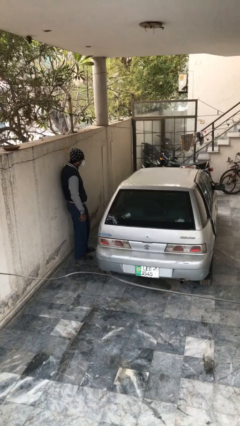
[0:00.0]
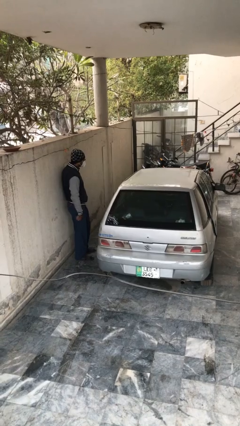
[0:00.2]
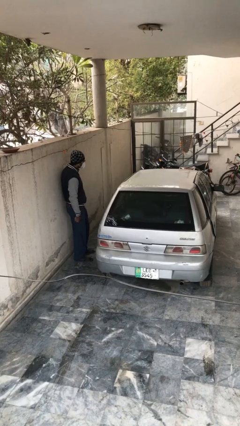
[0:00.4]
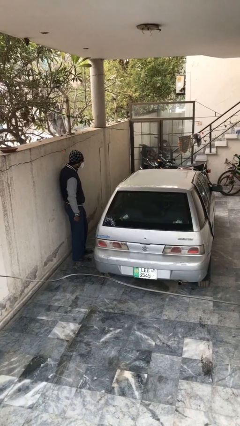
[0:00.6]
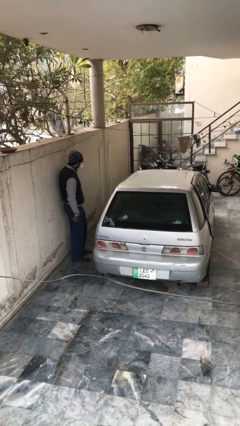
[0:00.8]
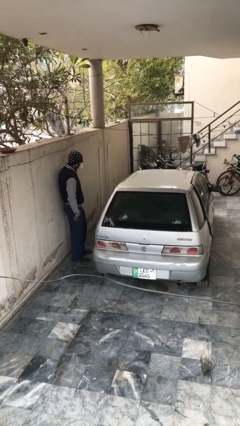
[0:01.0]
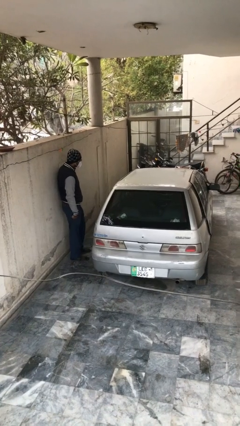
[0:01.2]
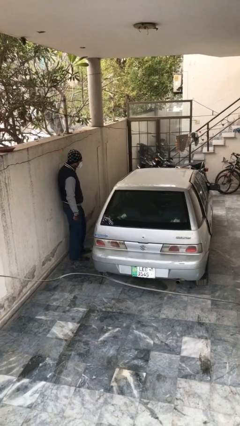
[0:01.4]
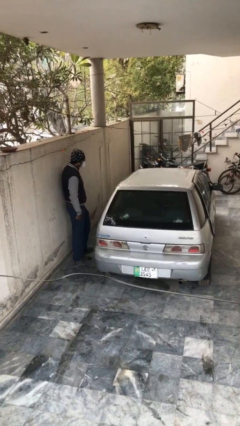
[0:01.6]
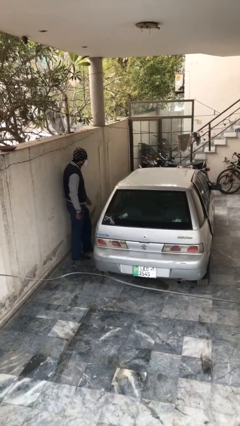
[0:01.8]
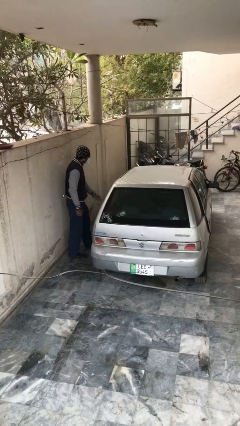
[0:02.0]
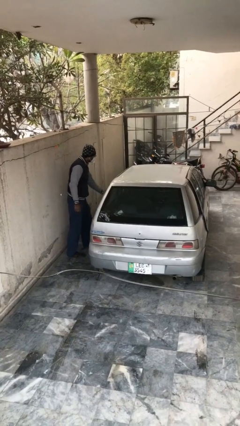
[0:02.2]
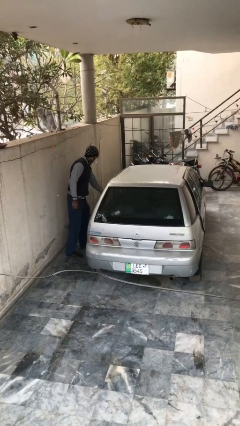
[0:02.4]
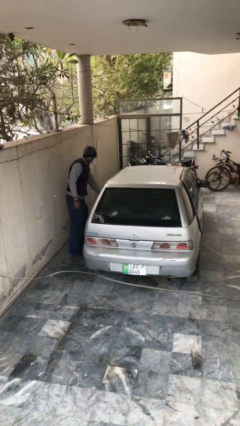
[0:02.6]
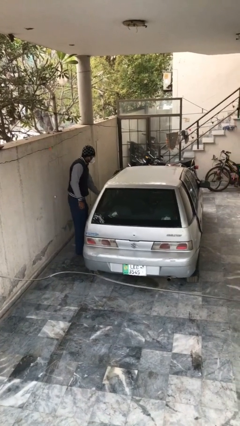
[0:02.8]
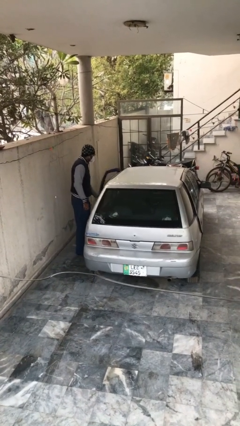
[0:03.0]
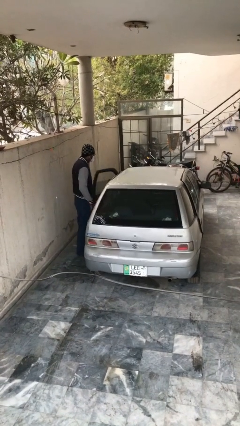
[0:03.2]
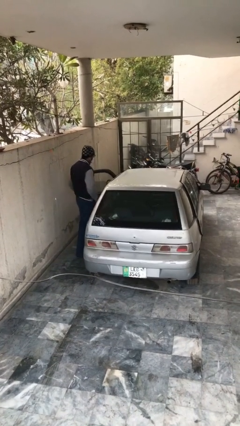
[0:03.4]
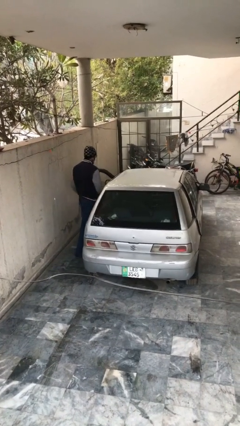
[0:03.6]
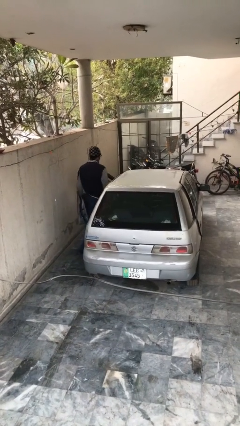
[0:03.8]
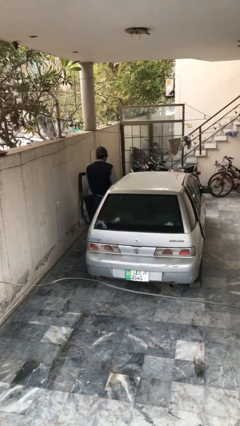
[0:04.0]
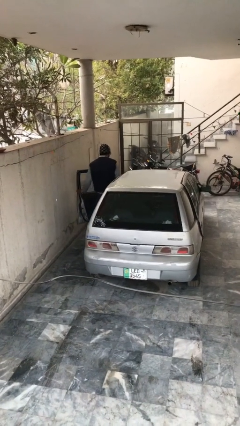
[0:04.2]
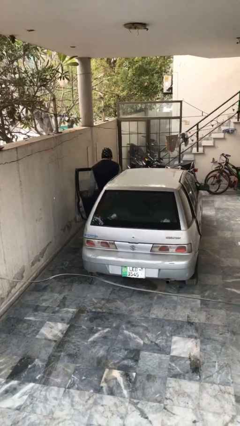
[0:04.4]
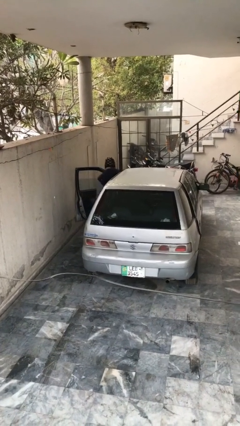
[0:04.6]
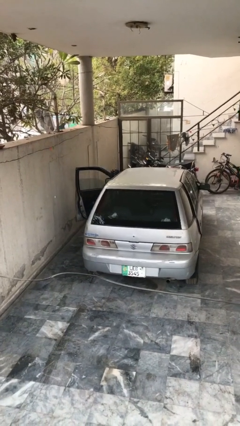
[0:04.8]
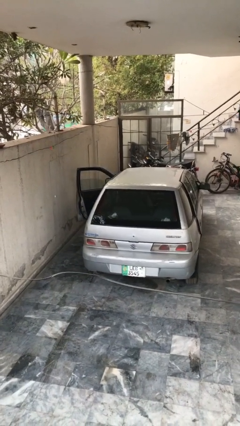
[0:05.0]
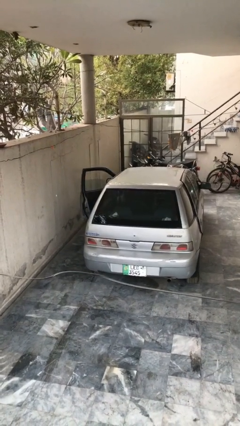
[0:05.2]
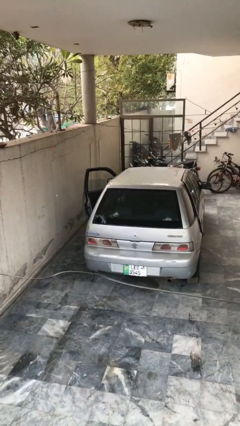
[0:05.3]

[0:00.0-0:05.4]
car picks up person

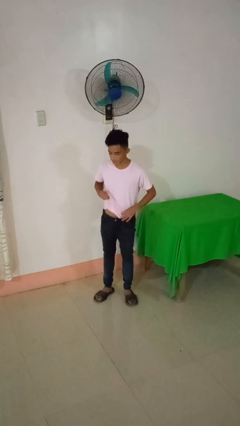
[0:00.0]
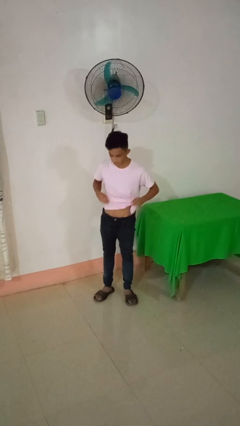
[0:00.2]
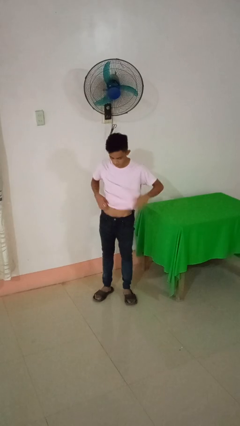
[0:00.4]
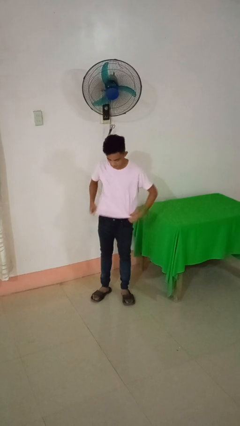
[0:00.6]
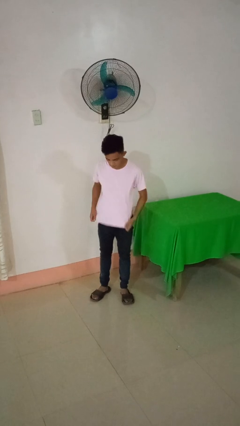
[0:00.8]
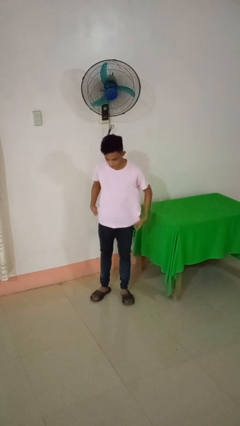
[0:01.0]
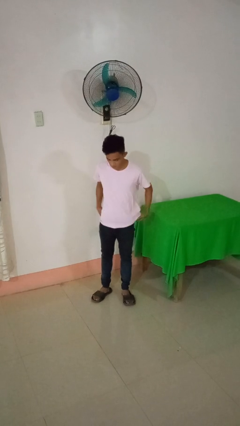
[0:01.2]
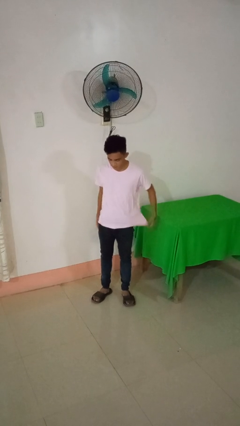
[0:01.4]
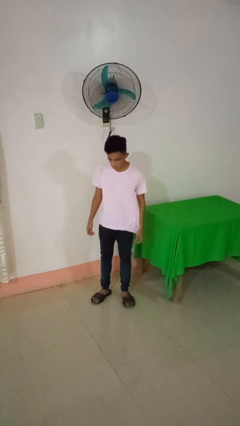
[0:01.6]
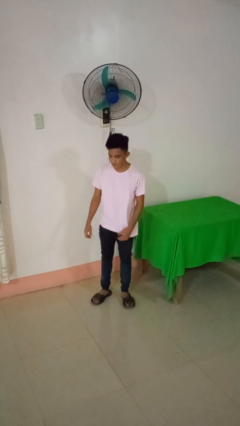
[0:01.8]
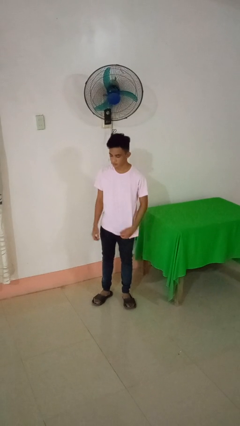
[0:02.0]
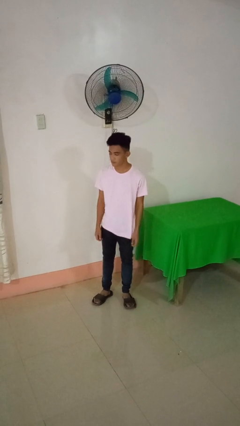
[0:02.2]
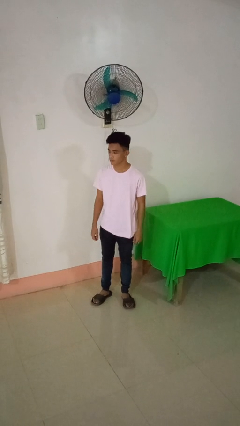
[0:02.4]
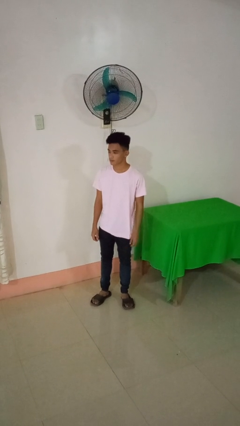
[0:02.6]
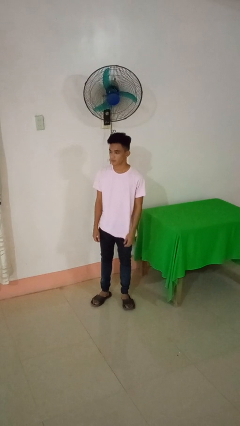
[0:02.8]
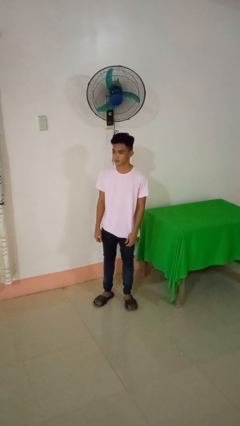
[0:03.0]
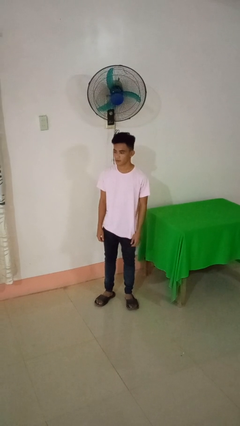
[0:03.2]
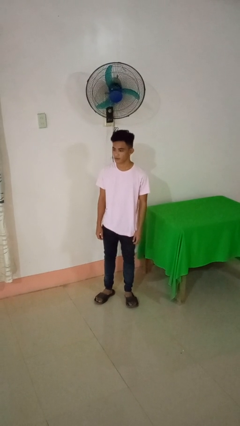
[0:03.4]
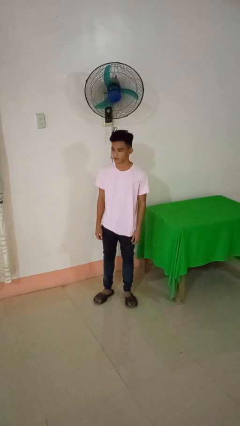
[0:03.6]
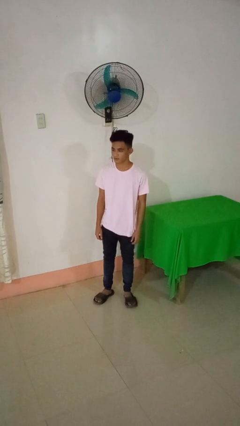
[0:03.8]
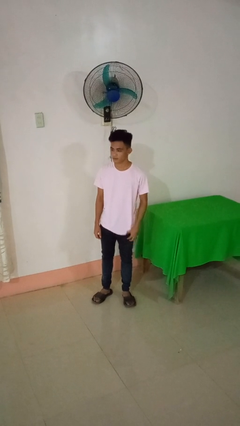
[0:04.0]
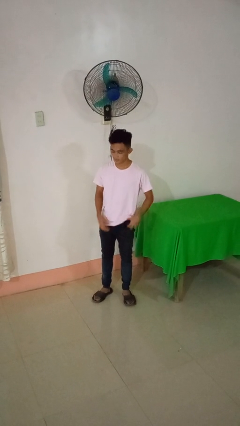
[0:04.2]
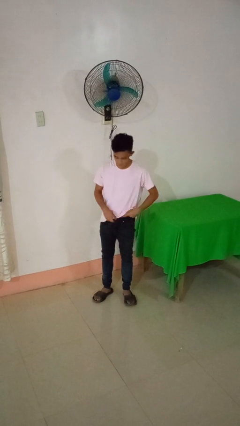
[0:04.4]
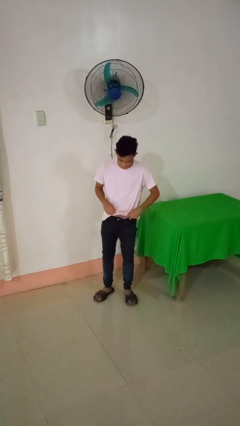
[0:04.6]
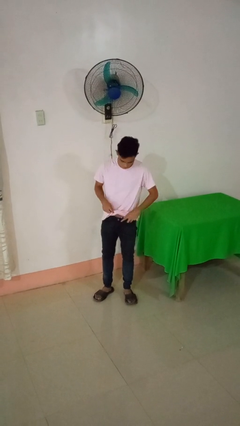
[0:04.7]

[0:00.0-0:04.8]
person untucks shirt

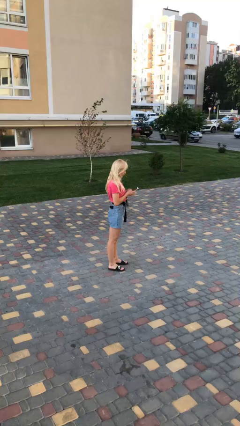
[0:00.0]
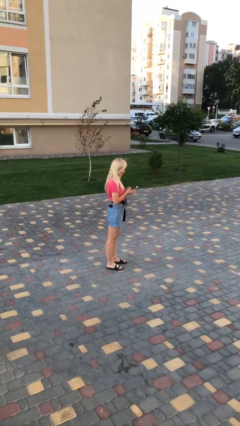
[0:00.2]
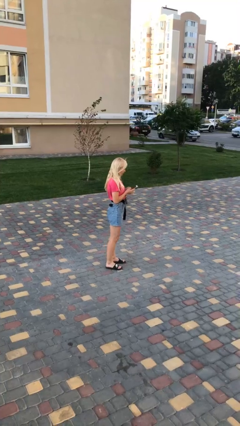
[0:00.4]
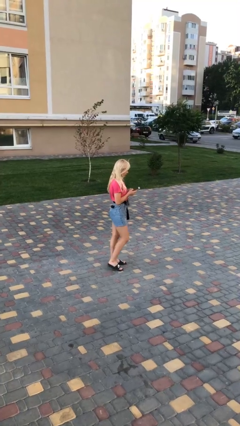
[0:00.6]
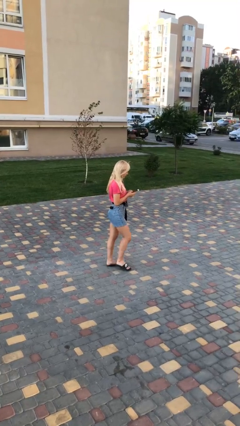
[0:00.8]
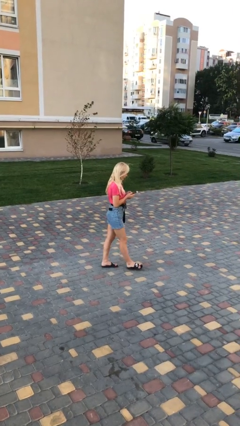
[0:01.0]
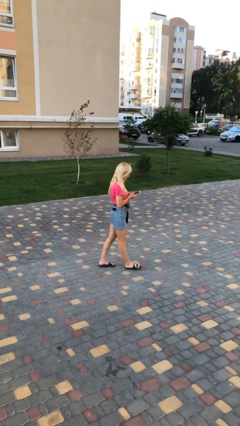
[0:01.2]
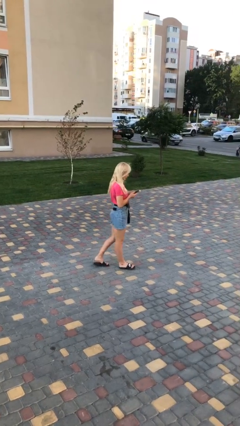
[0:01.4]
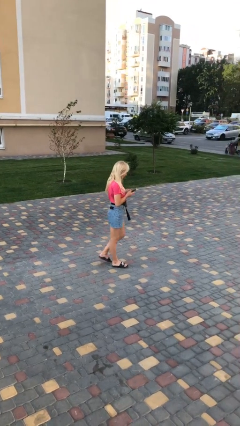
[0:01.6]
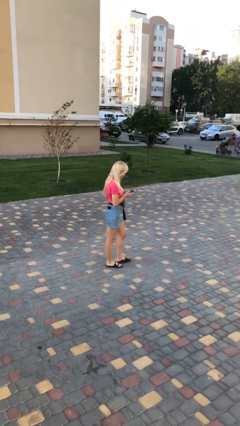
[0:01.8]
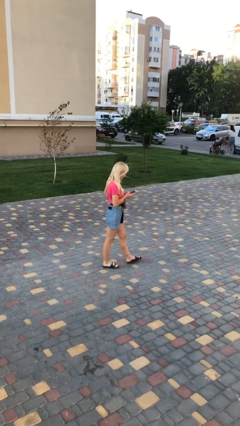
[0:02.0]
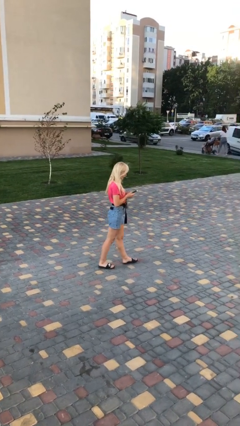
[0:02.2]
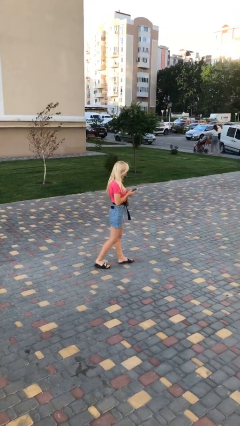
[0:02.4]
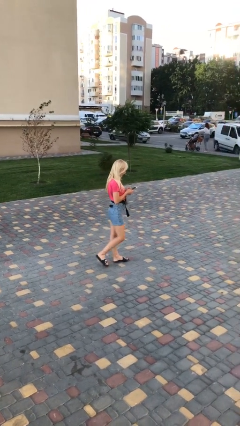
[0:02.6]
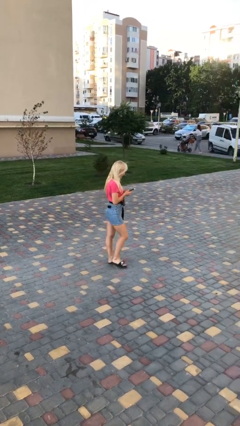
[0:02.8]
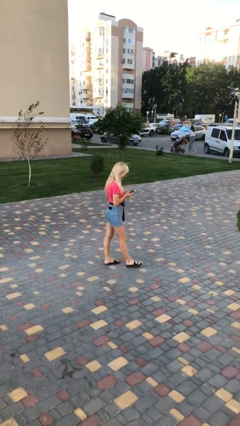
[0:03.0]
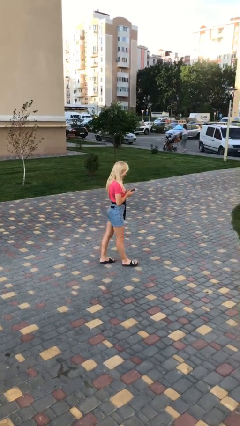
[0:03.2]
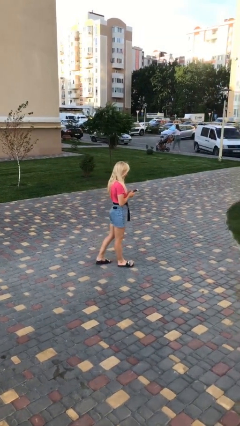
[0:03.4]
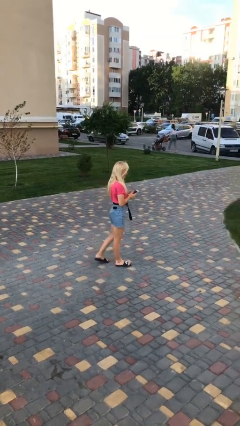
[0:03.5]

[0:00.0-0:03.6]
person texts on phone

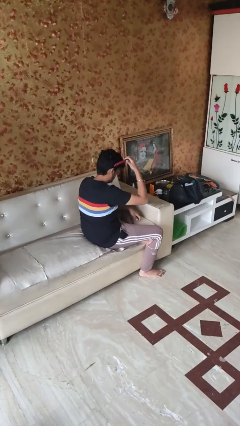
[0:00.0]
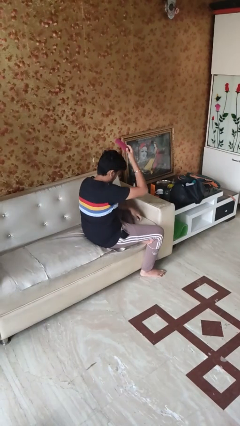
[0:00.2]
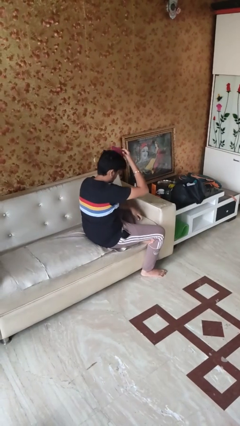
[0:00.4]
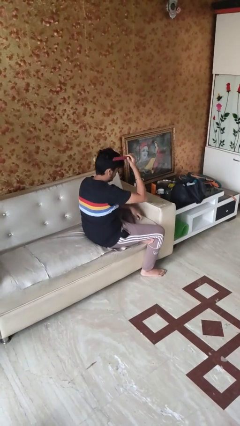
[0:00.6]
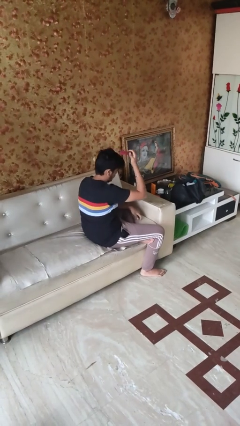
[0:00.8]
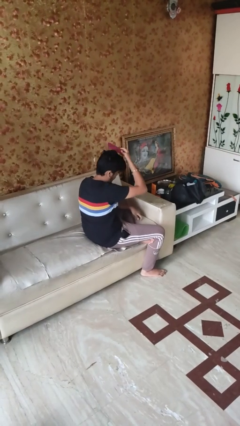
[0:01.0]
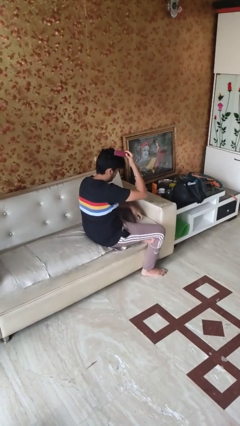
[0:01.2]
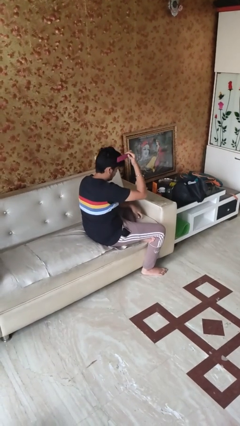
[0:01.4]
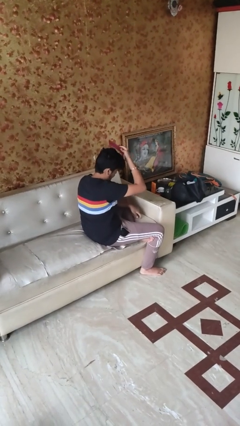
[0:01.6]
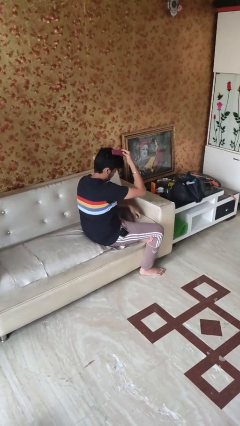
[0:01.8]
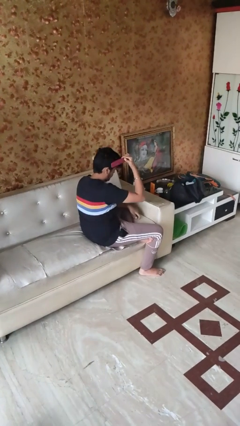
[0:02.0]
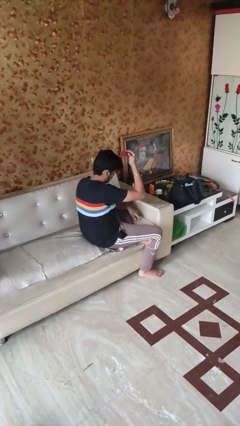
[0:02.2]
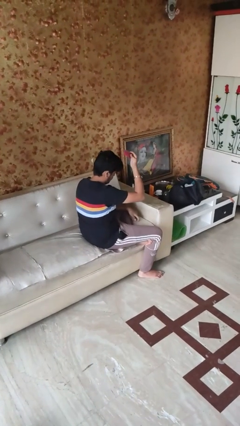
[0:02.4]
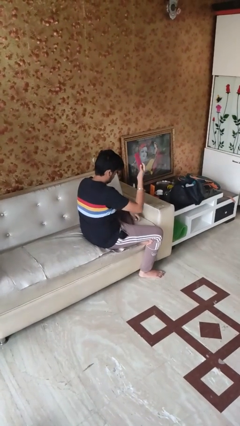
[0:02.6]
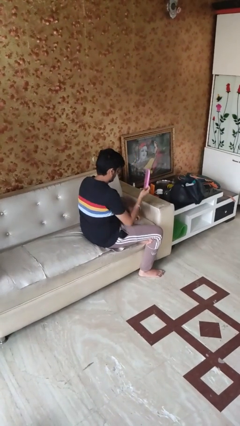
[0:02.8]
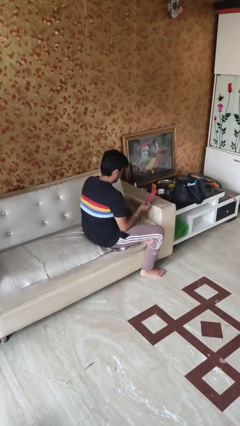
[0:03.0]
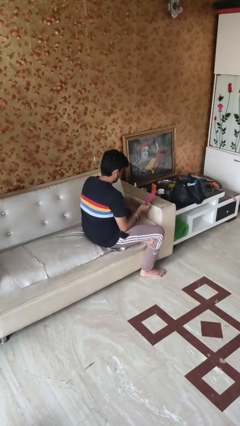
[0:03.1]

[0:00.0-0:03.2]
person brushes hair

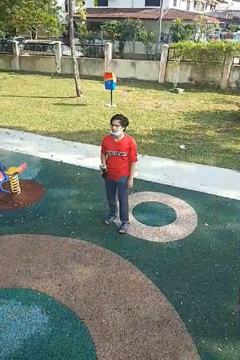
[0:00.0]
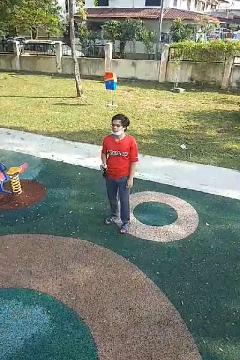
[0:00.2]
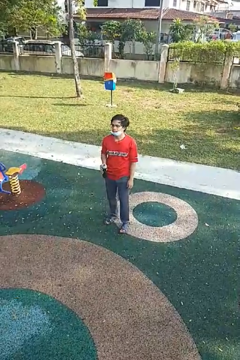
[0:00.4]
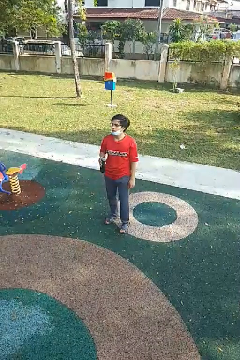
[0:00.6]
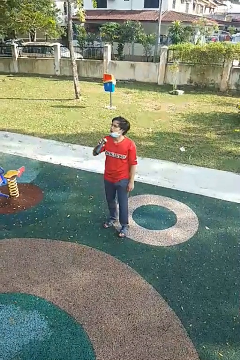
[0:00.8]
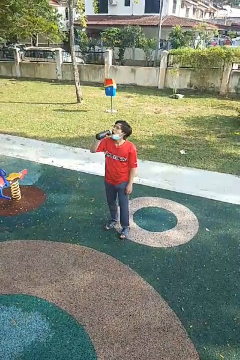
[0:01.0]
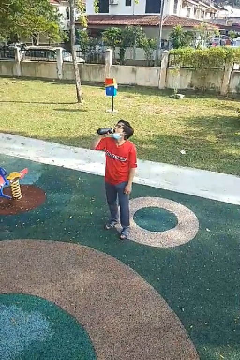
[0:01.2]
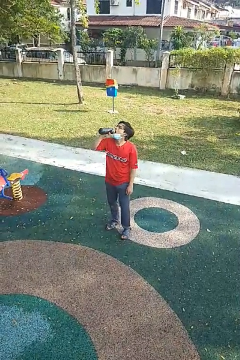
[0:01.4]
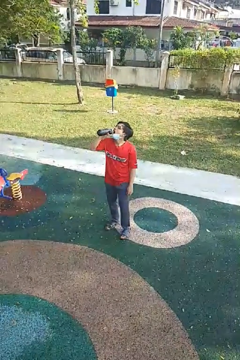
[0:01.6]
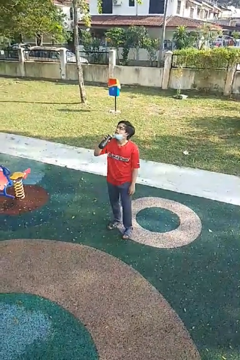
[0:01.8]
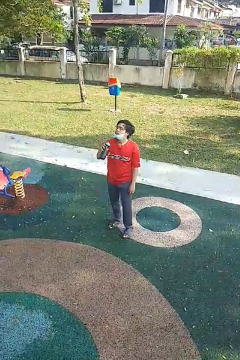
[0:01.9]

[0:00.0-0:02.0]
person drinks from bottle
